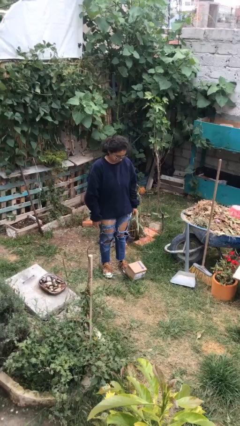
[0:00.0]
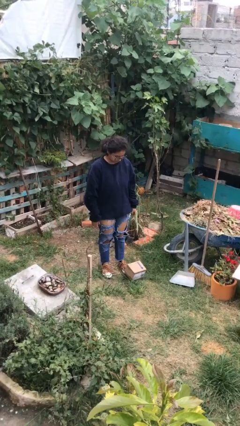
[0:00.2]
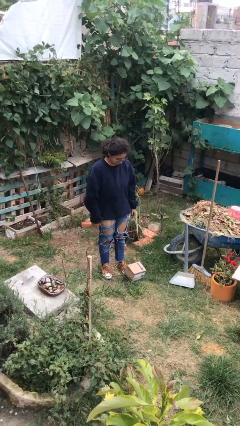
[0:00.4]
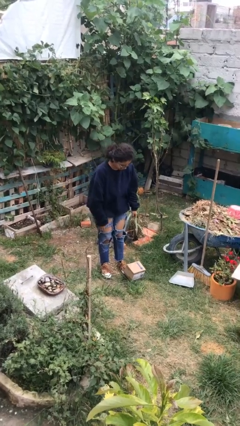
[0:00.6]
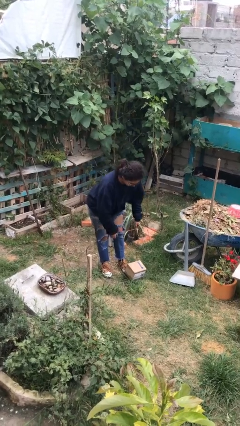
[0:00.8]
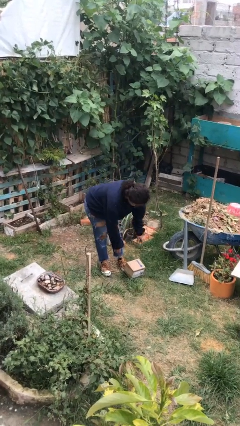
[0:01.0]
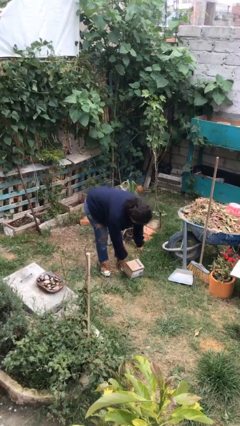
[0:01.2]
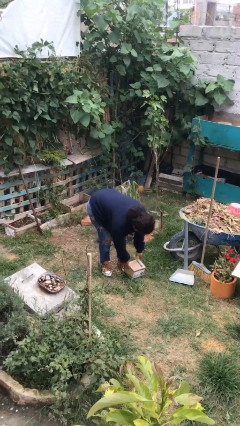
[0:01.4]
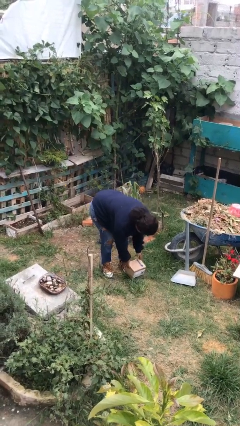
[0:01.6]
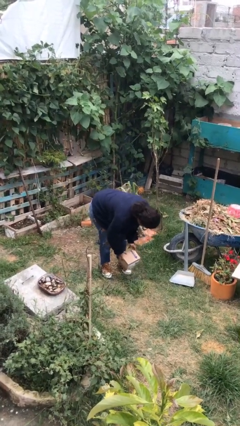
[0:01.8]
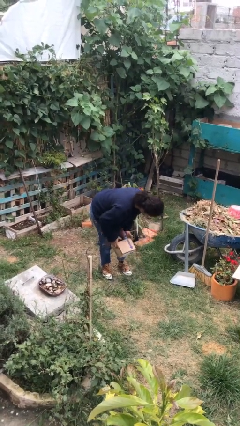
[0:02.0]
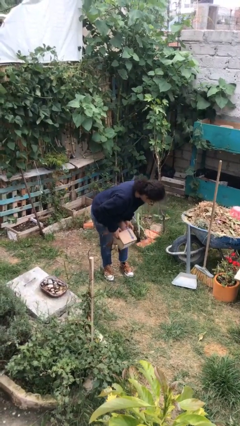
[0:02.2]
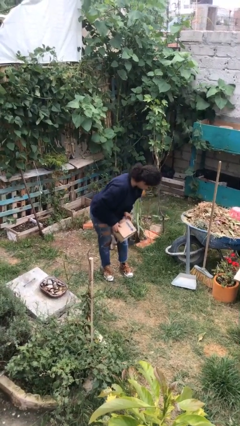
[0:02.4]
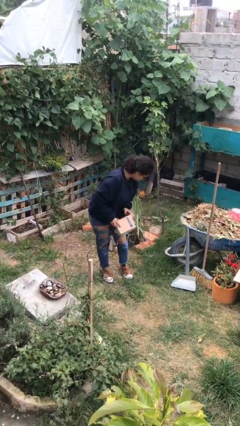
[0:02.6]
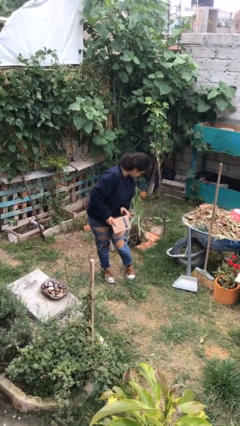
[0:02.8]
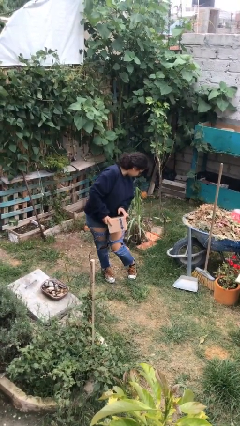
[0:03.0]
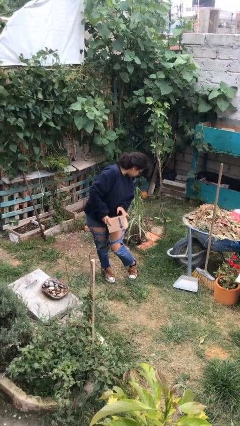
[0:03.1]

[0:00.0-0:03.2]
person picks up object from floor

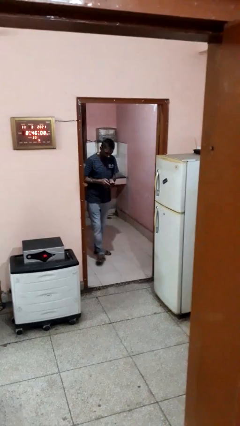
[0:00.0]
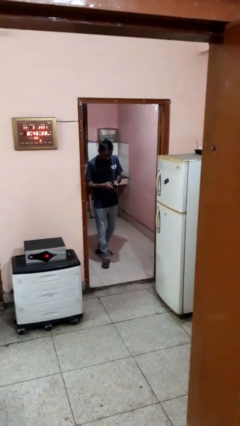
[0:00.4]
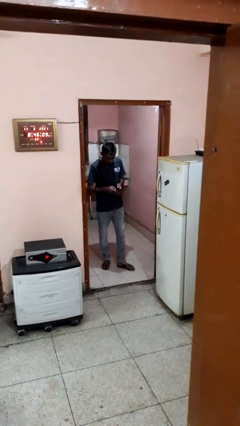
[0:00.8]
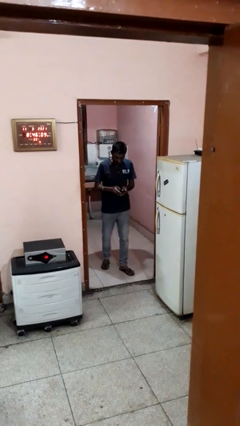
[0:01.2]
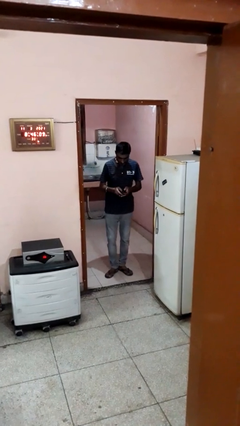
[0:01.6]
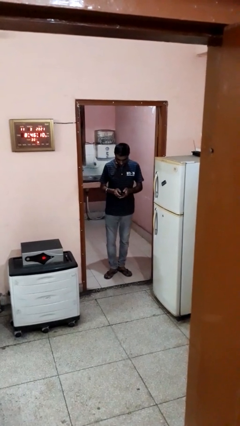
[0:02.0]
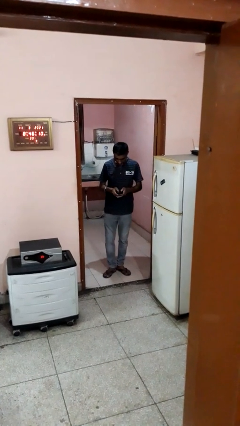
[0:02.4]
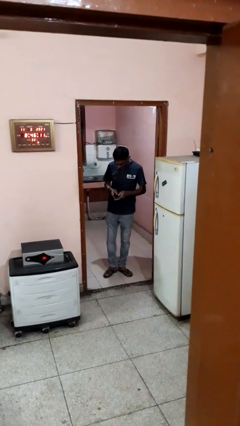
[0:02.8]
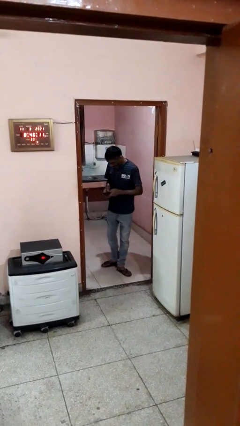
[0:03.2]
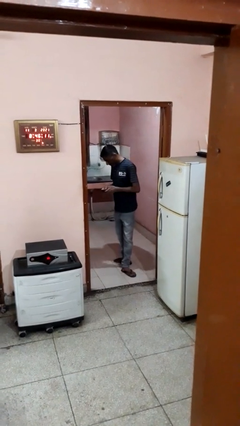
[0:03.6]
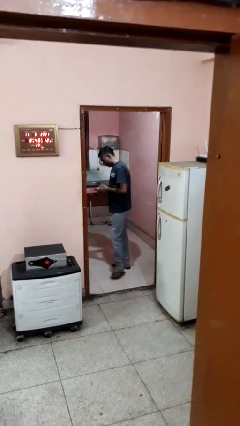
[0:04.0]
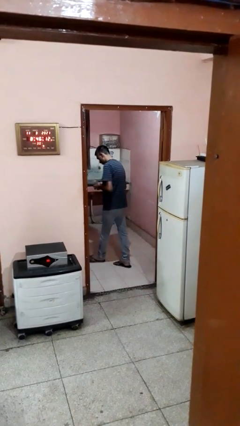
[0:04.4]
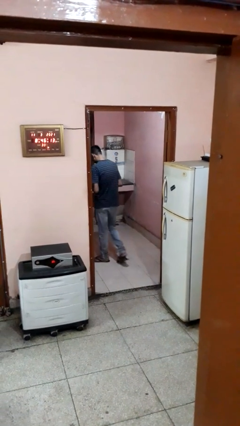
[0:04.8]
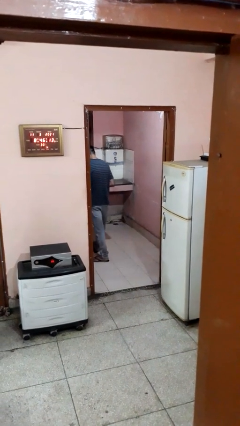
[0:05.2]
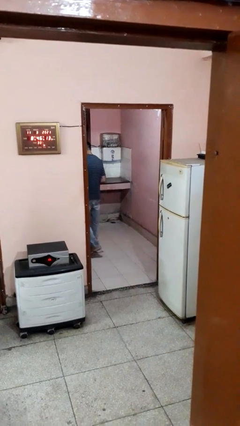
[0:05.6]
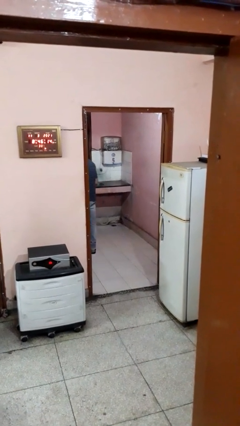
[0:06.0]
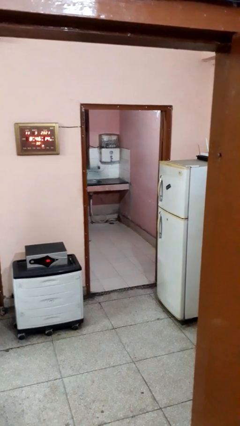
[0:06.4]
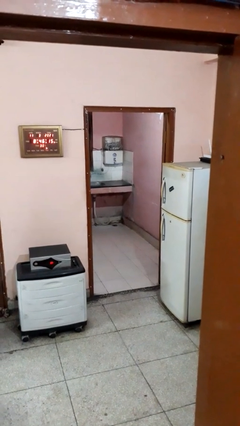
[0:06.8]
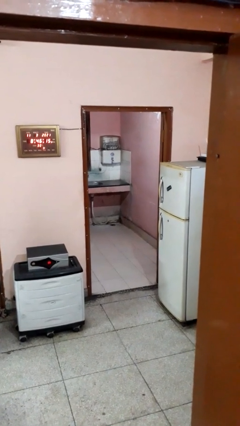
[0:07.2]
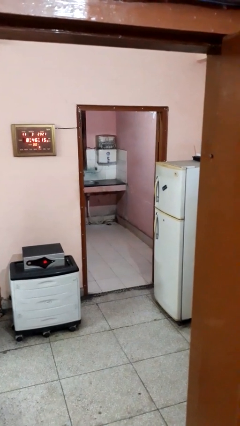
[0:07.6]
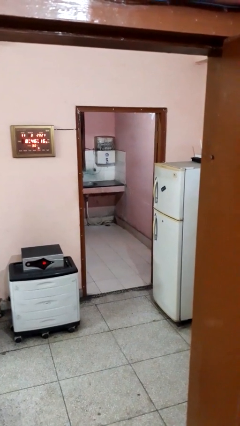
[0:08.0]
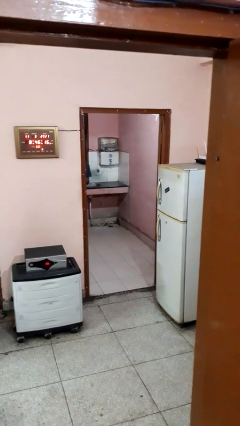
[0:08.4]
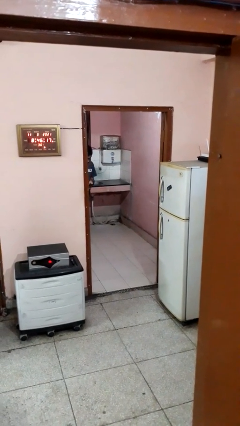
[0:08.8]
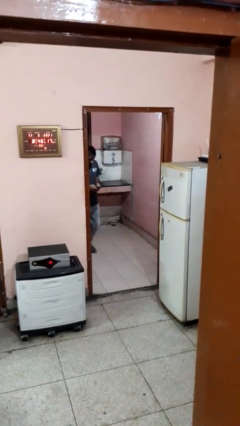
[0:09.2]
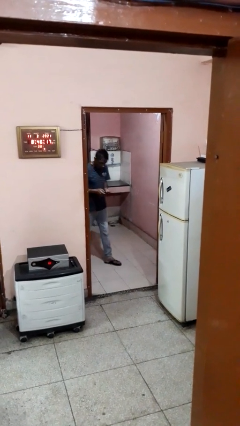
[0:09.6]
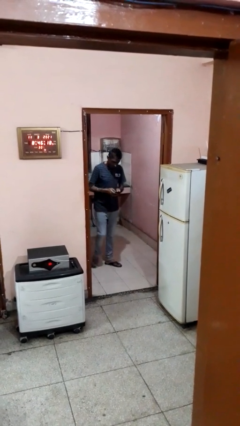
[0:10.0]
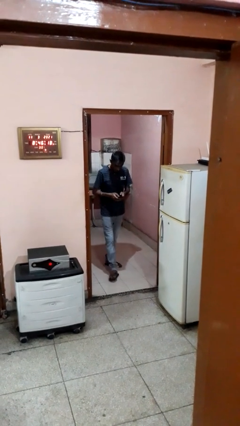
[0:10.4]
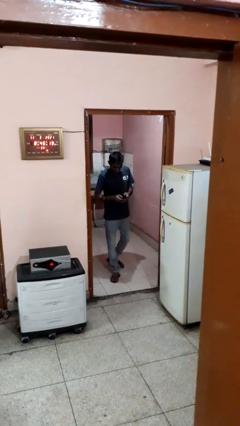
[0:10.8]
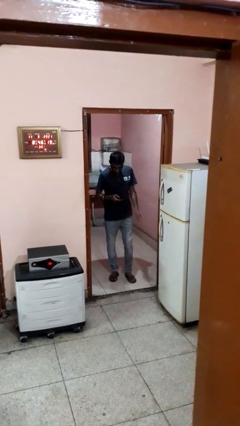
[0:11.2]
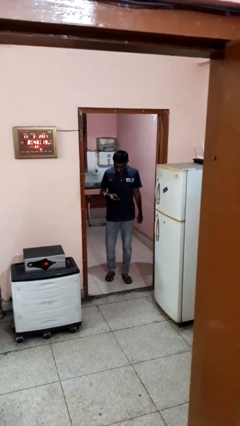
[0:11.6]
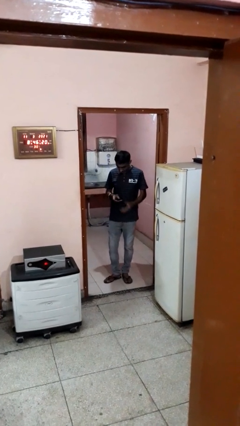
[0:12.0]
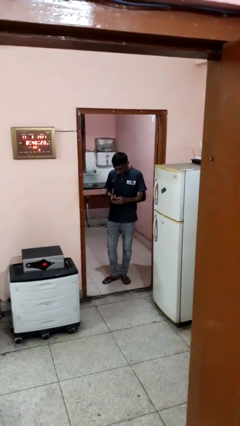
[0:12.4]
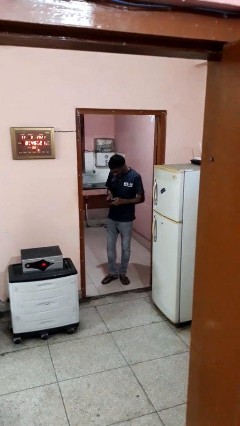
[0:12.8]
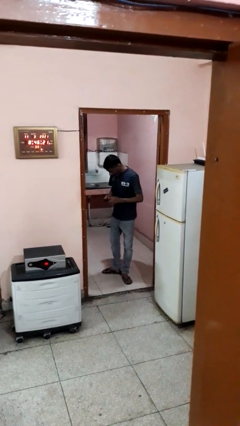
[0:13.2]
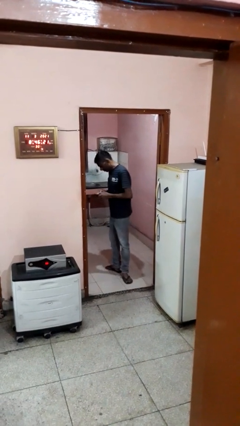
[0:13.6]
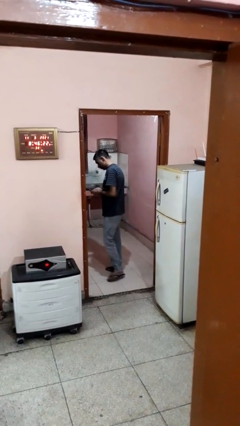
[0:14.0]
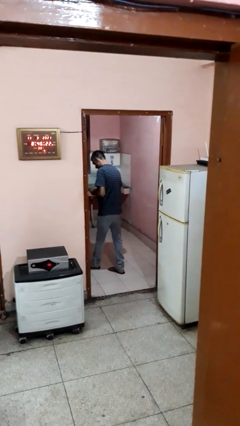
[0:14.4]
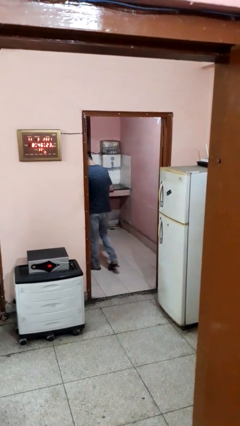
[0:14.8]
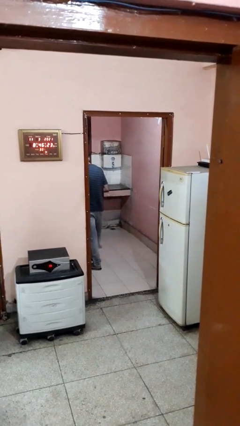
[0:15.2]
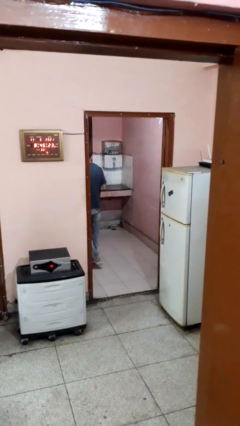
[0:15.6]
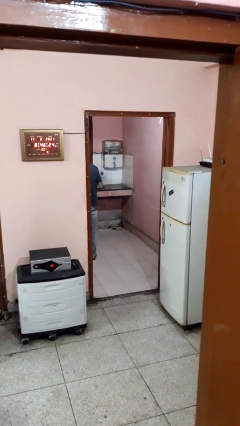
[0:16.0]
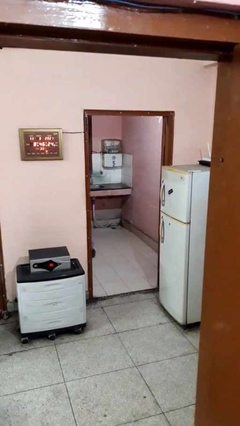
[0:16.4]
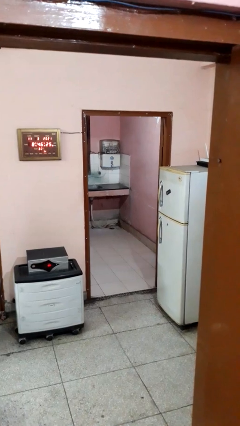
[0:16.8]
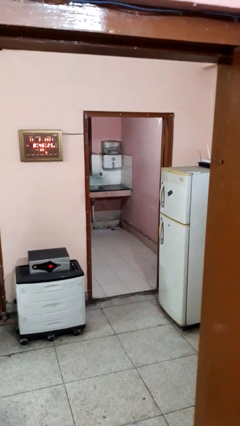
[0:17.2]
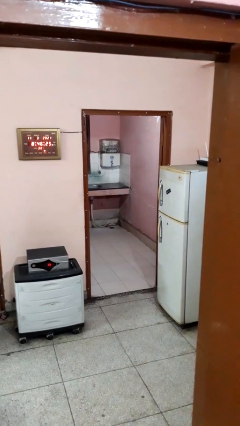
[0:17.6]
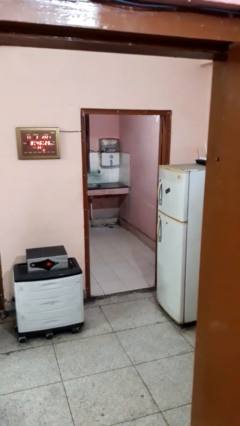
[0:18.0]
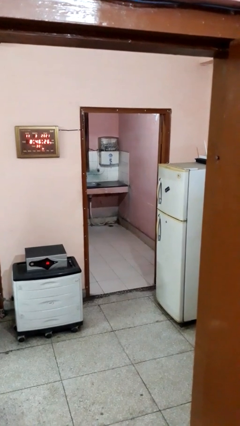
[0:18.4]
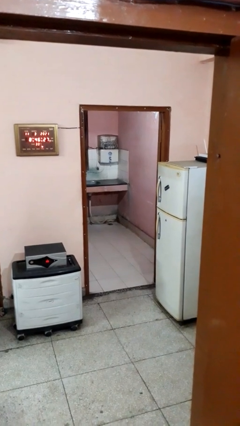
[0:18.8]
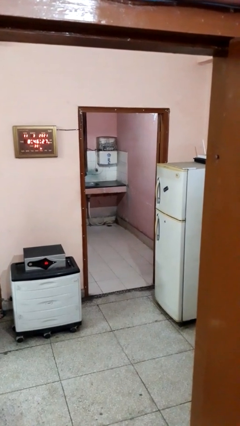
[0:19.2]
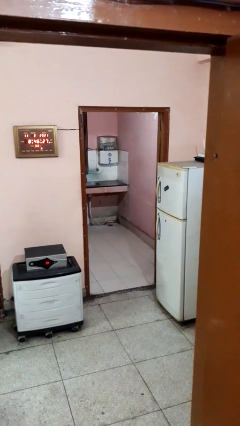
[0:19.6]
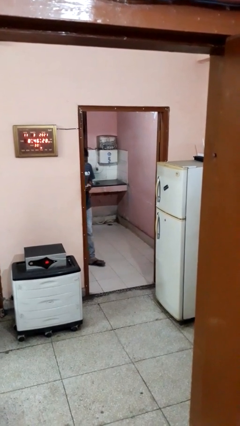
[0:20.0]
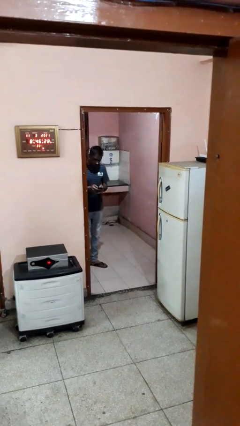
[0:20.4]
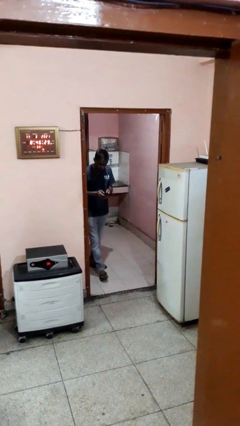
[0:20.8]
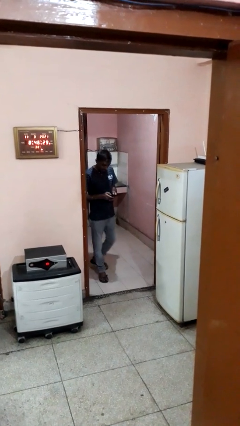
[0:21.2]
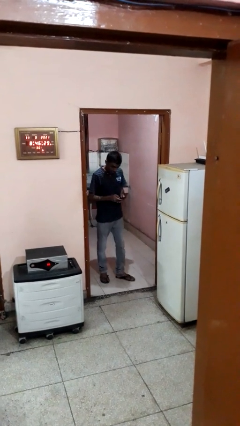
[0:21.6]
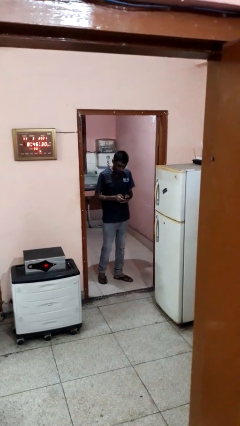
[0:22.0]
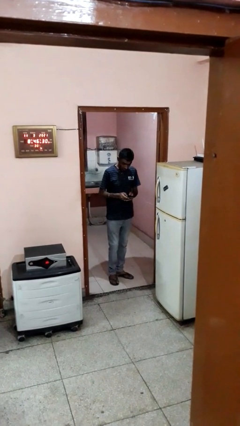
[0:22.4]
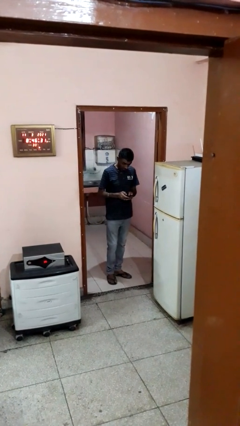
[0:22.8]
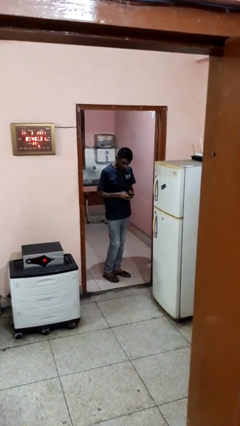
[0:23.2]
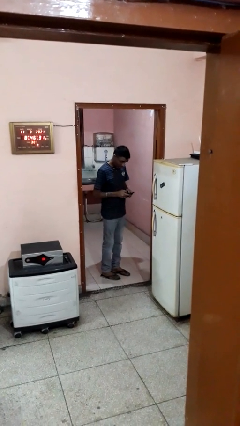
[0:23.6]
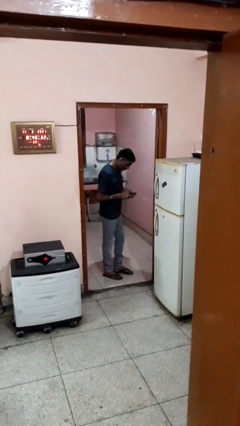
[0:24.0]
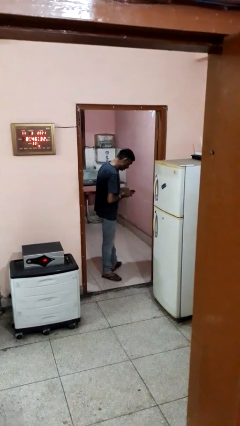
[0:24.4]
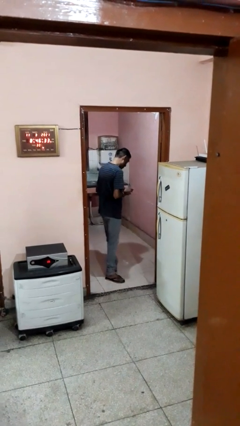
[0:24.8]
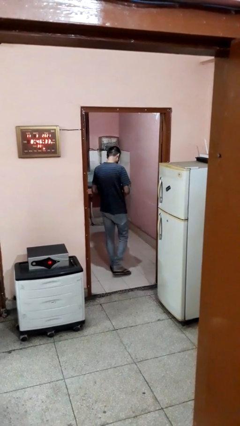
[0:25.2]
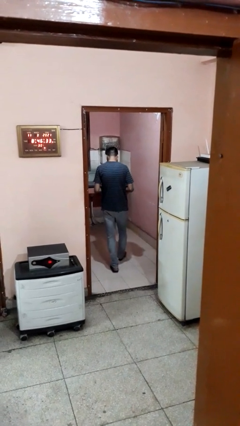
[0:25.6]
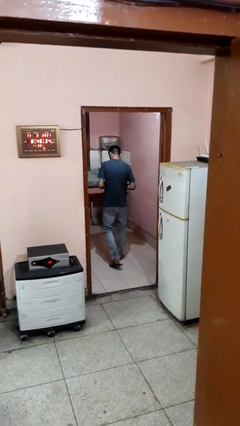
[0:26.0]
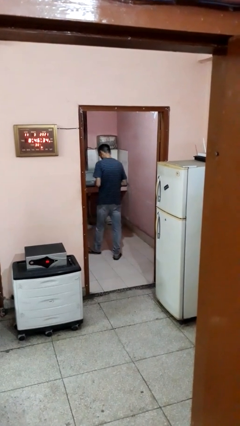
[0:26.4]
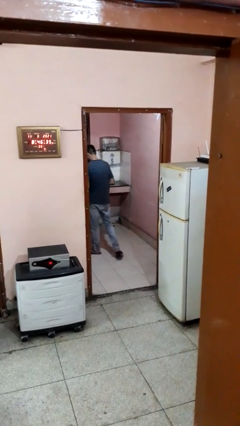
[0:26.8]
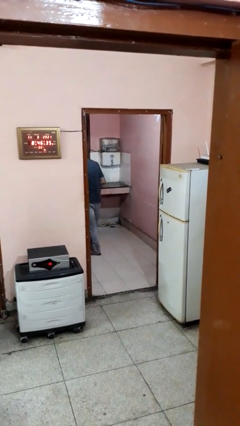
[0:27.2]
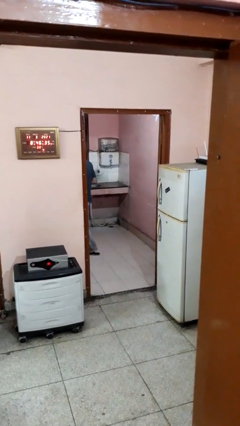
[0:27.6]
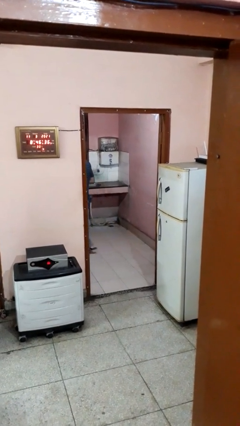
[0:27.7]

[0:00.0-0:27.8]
person texts on phone

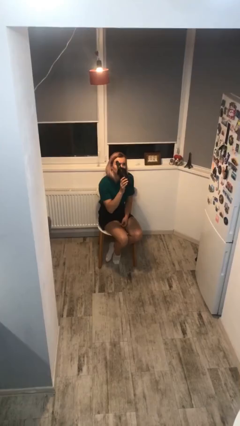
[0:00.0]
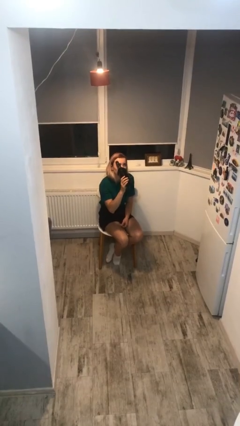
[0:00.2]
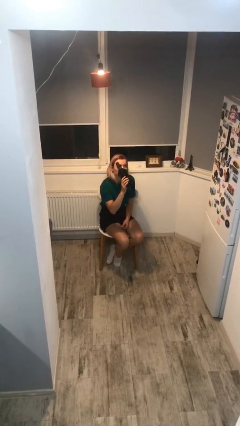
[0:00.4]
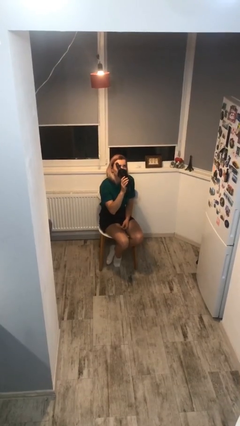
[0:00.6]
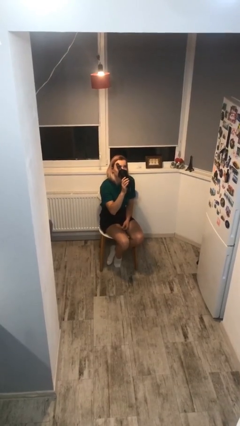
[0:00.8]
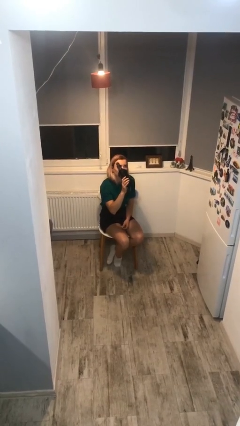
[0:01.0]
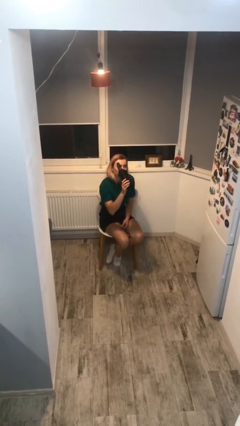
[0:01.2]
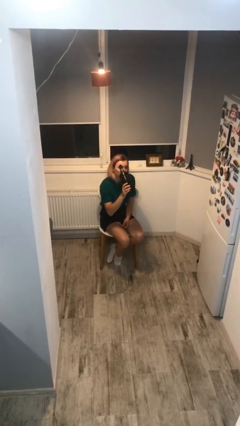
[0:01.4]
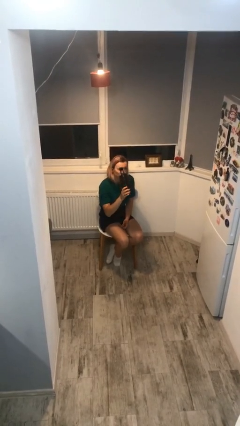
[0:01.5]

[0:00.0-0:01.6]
person drinks from bottle
